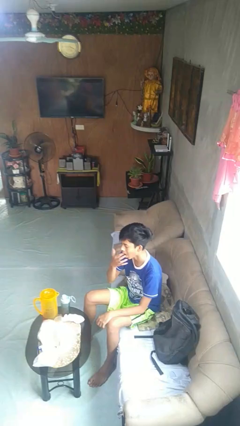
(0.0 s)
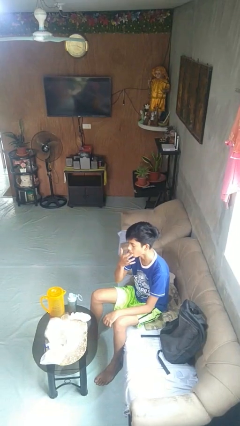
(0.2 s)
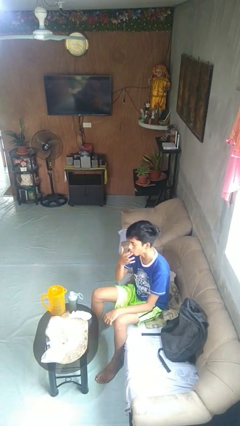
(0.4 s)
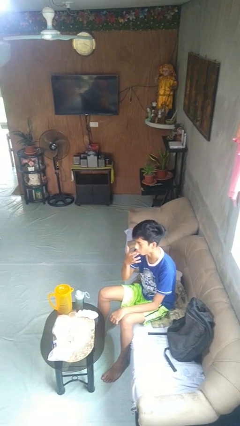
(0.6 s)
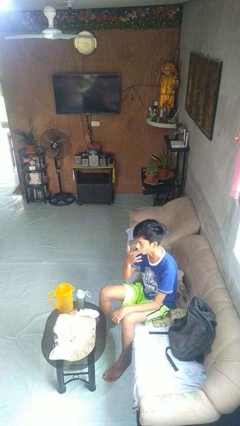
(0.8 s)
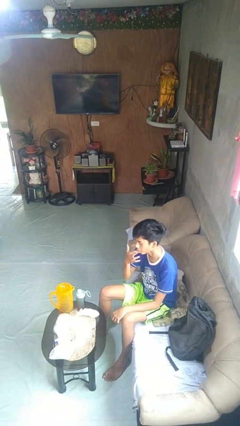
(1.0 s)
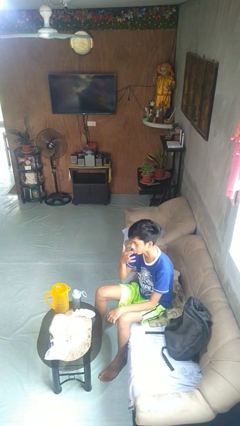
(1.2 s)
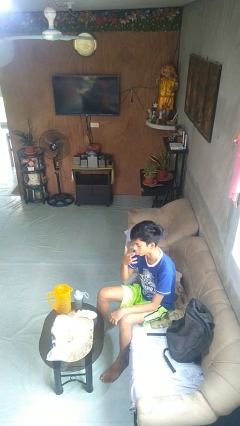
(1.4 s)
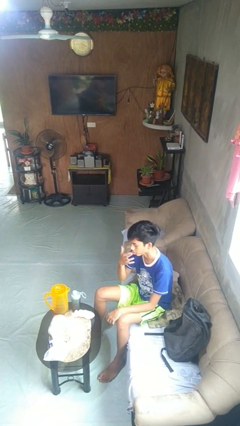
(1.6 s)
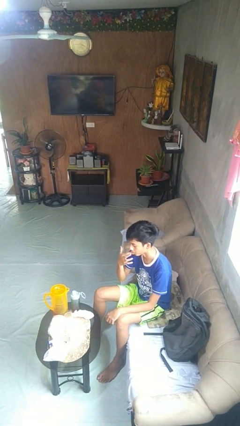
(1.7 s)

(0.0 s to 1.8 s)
person licks fingers

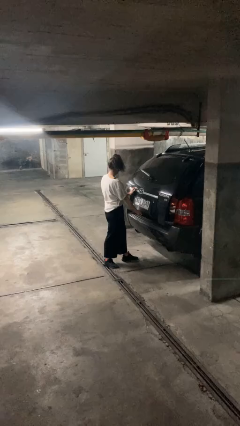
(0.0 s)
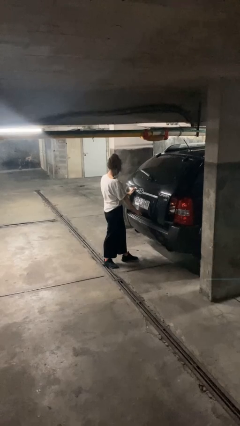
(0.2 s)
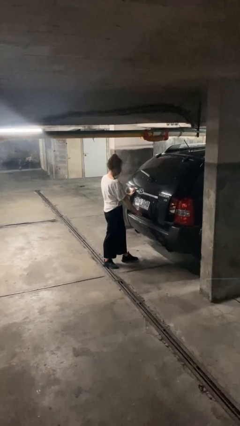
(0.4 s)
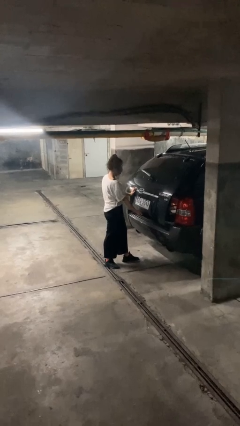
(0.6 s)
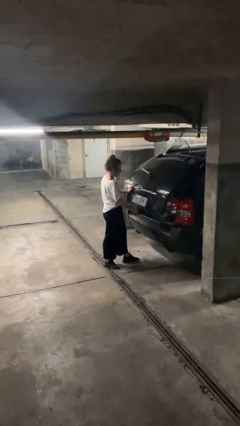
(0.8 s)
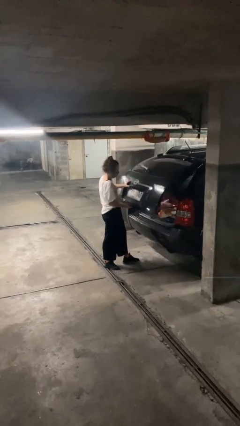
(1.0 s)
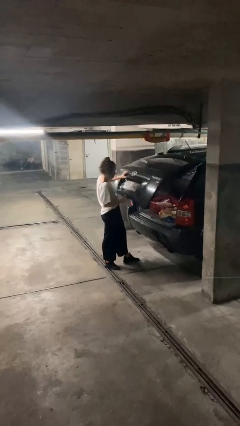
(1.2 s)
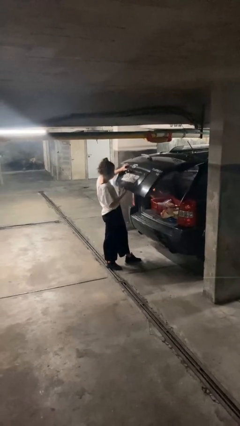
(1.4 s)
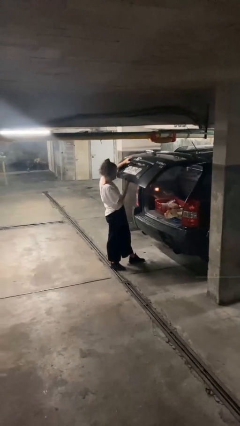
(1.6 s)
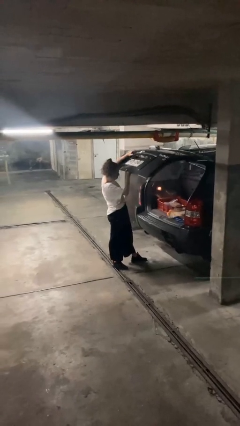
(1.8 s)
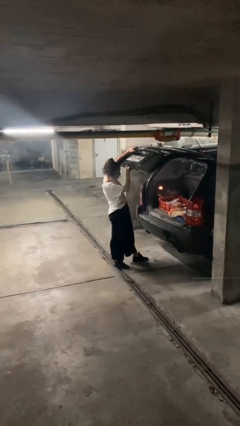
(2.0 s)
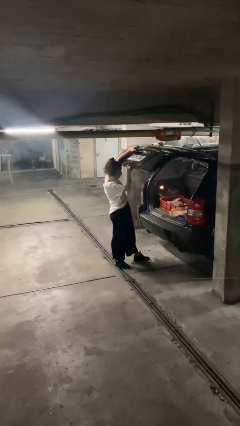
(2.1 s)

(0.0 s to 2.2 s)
person opens car trunk

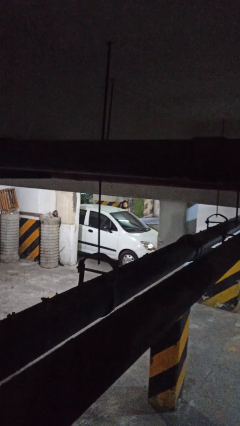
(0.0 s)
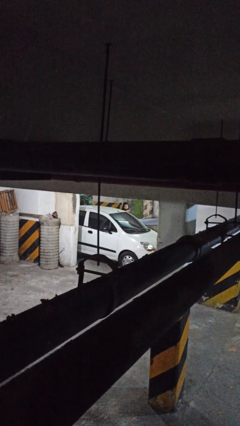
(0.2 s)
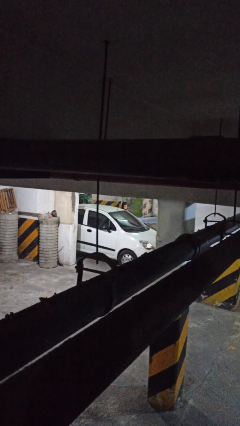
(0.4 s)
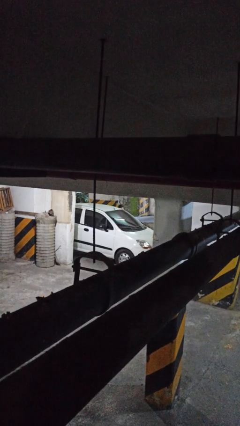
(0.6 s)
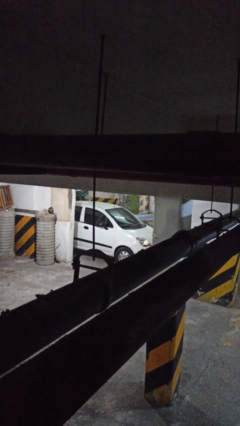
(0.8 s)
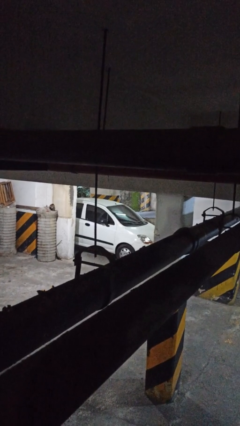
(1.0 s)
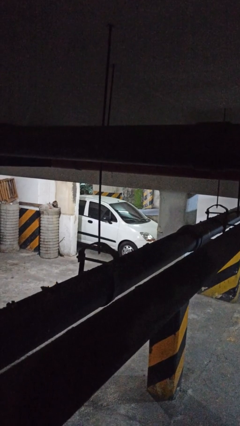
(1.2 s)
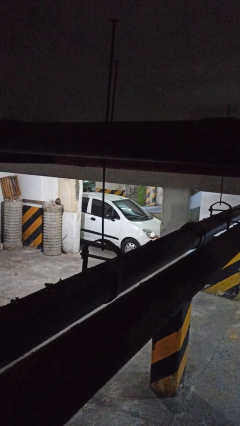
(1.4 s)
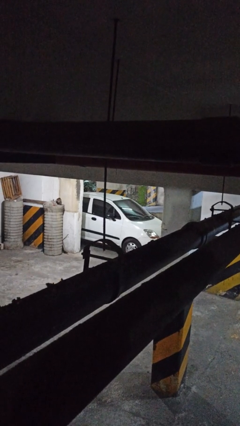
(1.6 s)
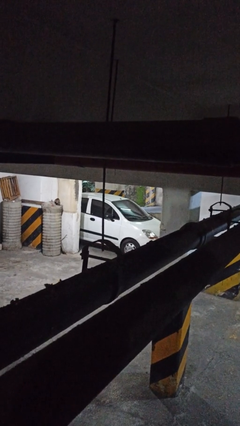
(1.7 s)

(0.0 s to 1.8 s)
person enters car

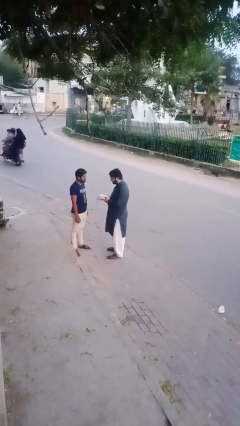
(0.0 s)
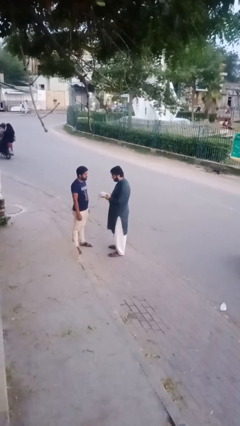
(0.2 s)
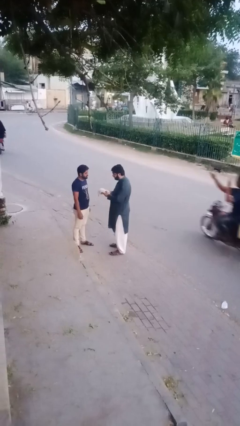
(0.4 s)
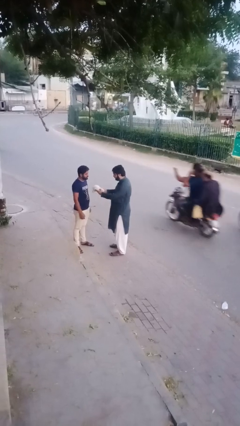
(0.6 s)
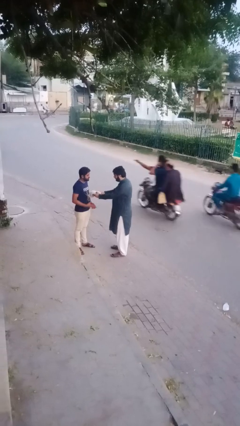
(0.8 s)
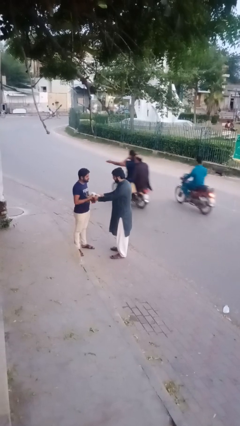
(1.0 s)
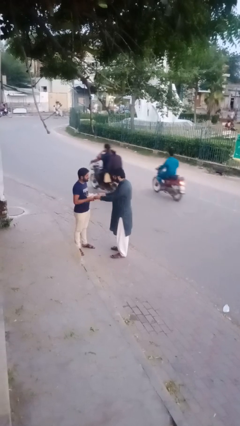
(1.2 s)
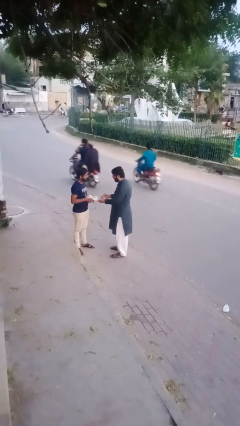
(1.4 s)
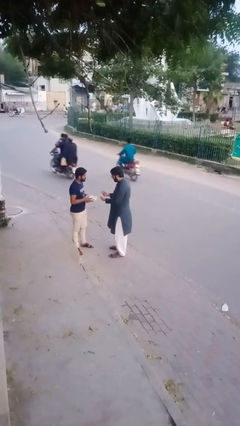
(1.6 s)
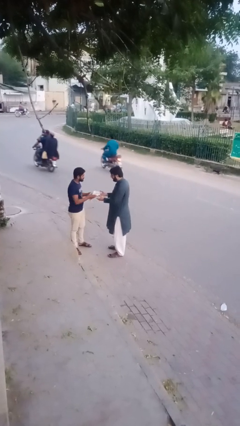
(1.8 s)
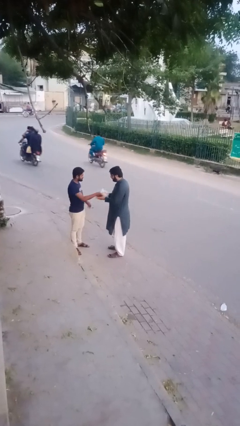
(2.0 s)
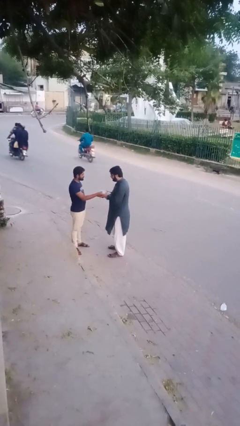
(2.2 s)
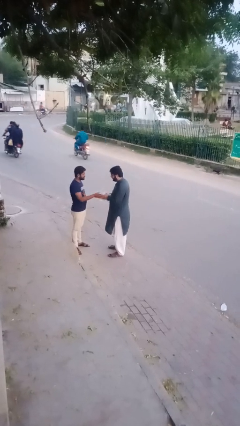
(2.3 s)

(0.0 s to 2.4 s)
person transfers object to person

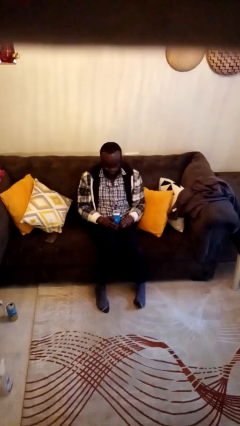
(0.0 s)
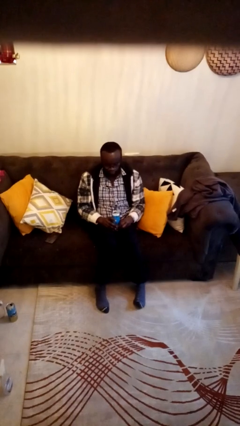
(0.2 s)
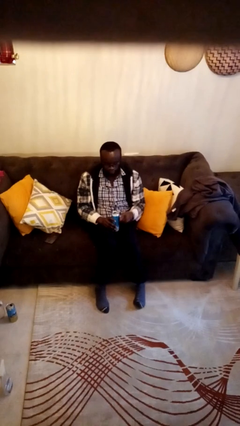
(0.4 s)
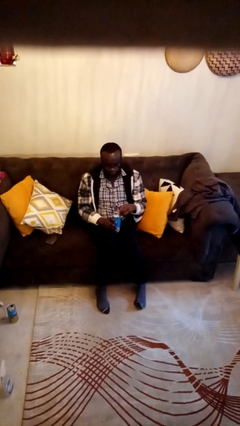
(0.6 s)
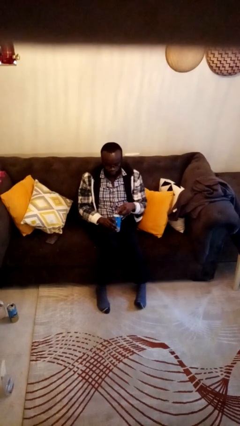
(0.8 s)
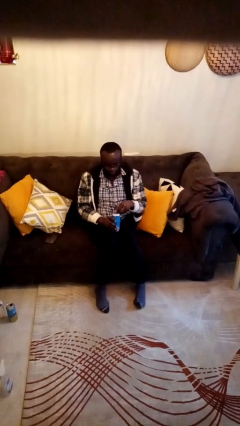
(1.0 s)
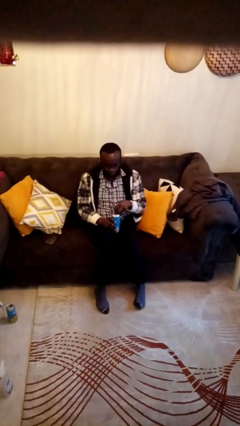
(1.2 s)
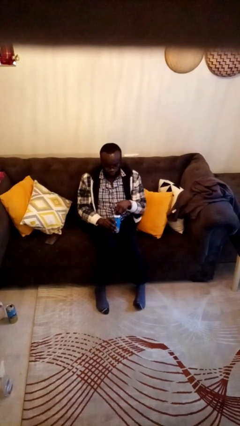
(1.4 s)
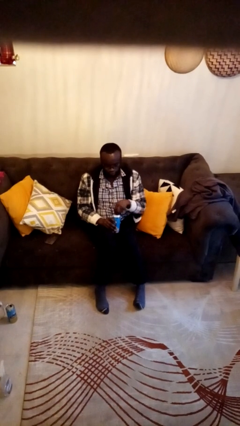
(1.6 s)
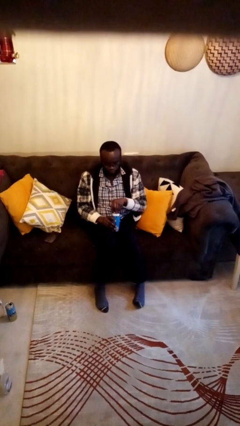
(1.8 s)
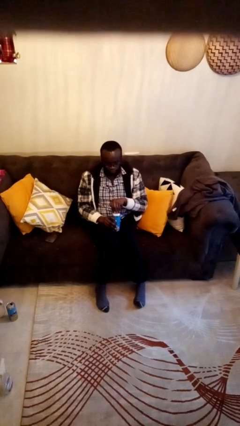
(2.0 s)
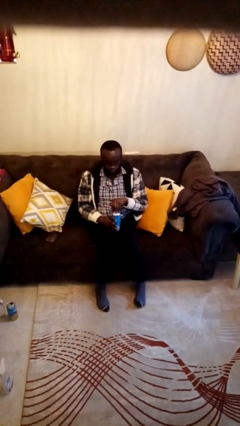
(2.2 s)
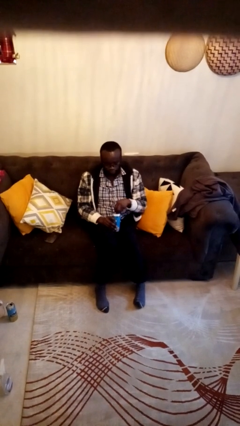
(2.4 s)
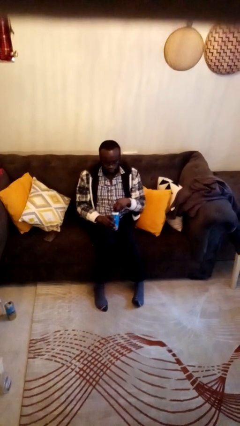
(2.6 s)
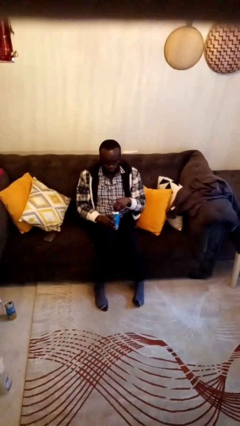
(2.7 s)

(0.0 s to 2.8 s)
person opens beverage can

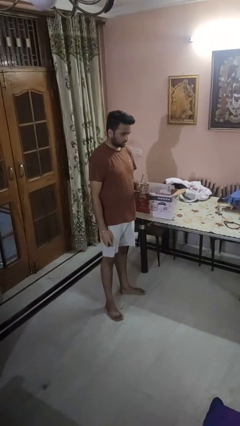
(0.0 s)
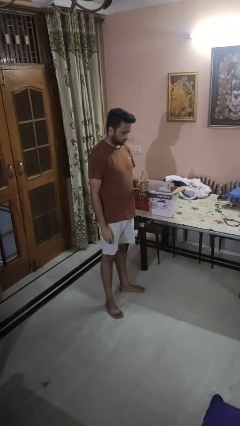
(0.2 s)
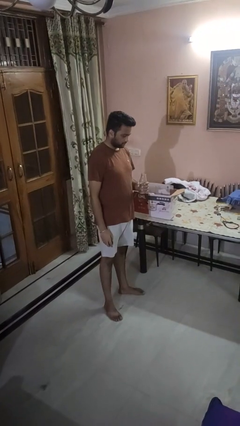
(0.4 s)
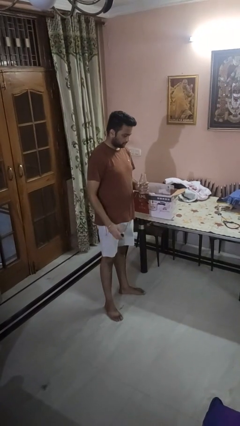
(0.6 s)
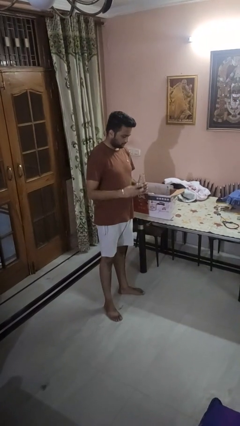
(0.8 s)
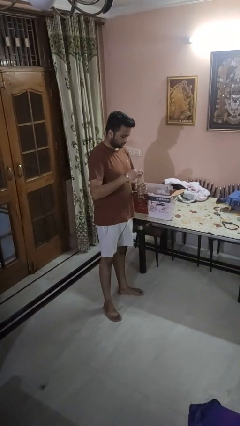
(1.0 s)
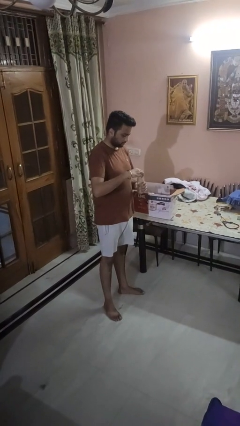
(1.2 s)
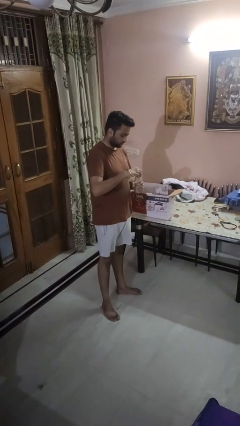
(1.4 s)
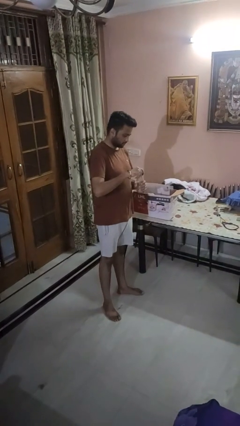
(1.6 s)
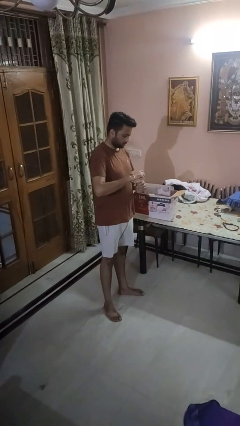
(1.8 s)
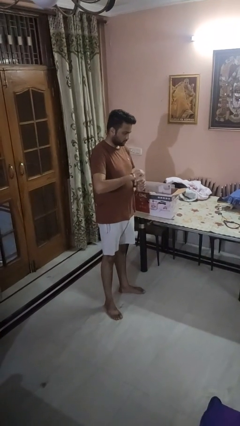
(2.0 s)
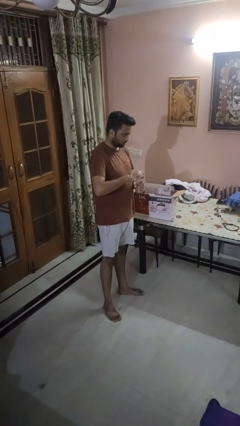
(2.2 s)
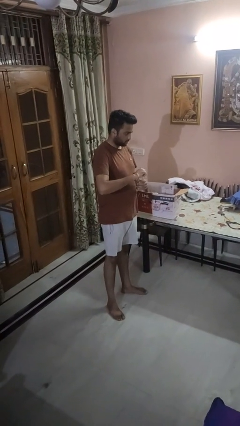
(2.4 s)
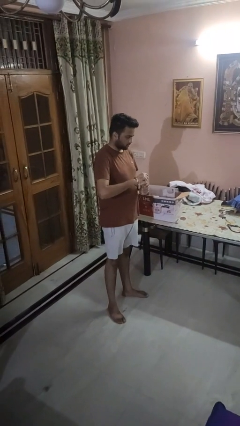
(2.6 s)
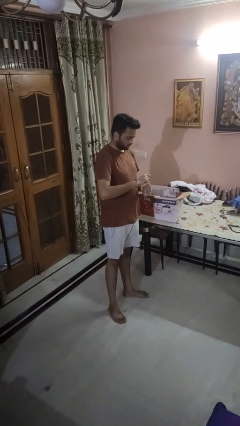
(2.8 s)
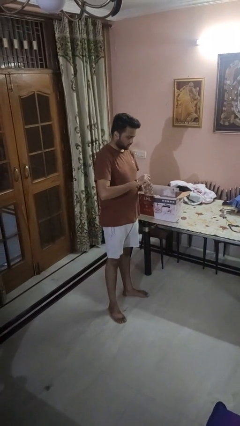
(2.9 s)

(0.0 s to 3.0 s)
person screws lid to bottle

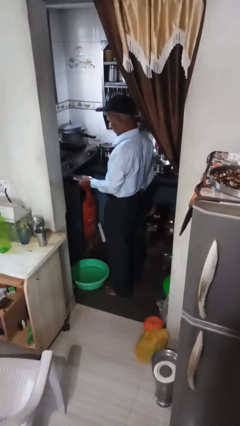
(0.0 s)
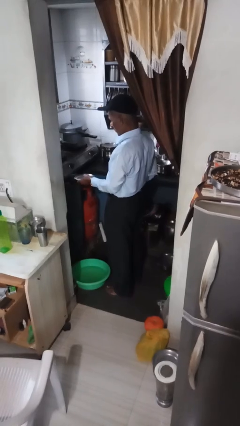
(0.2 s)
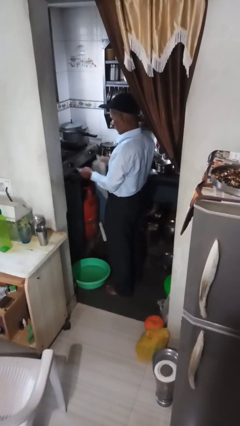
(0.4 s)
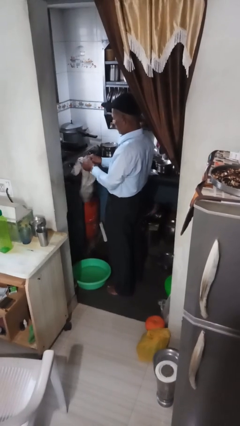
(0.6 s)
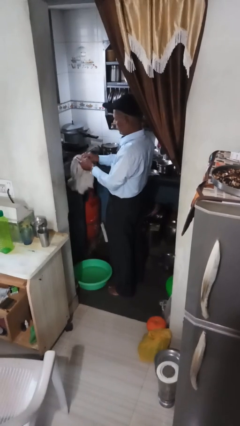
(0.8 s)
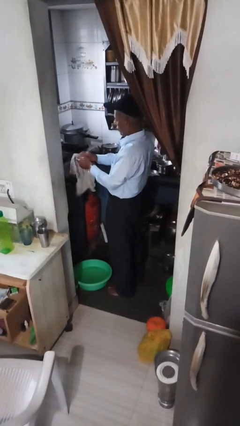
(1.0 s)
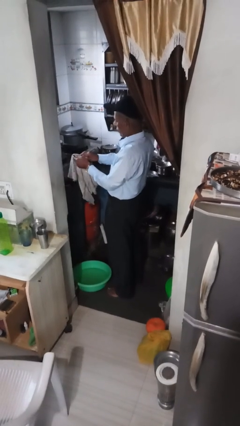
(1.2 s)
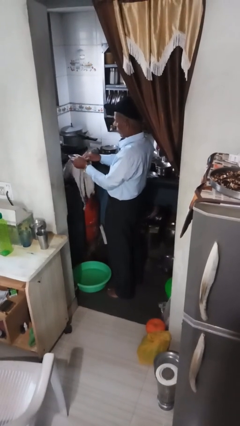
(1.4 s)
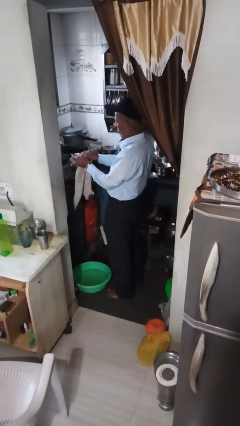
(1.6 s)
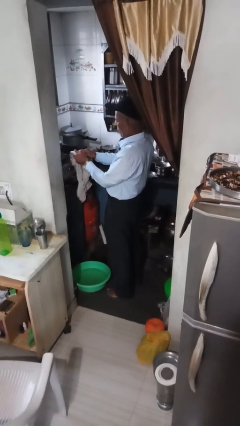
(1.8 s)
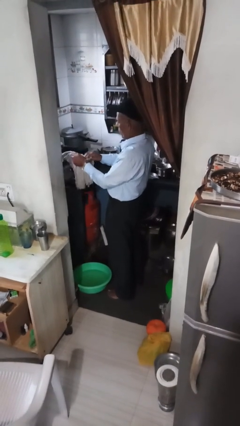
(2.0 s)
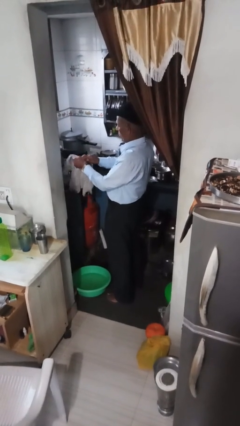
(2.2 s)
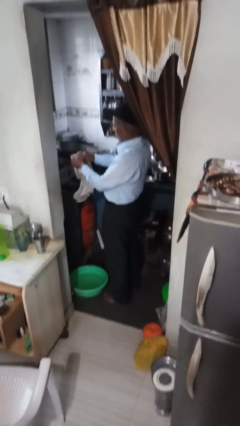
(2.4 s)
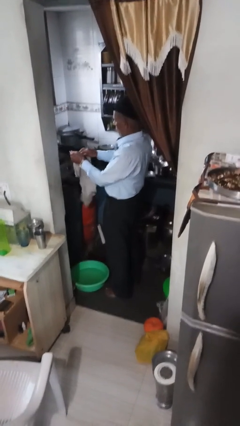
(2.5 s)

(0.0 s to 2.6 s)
person dries dish

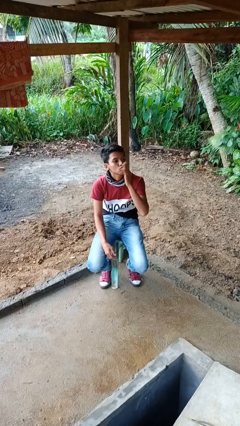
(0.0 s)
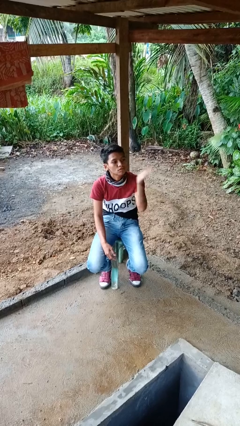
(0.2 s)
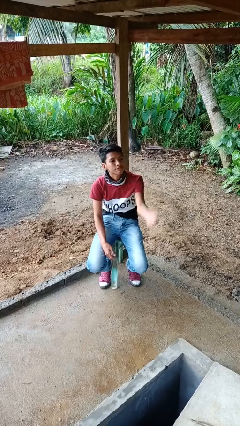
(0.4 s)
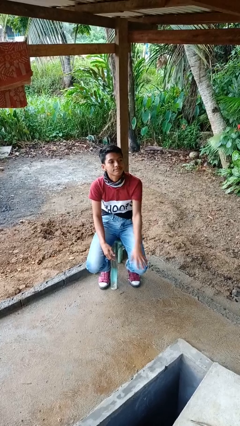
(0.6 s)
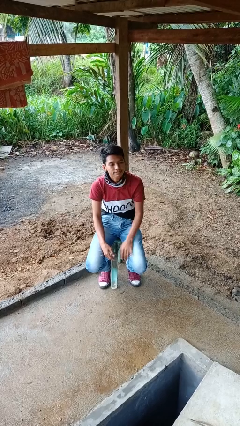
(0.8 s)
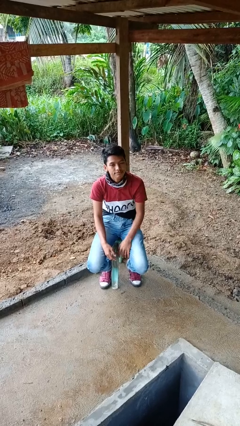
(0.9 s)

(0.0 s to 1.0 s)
person gestures blow kiss
